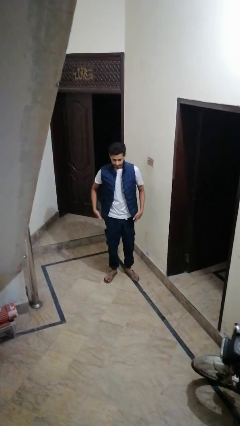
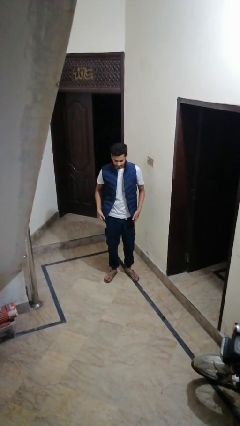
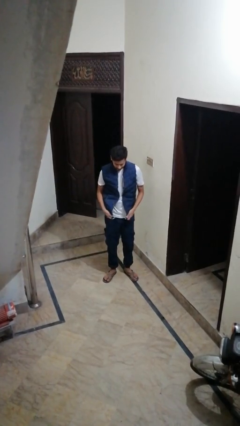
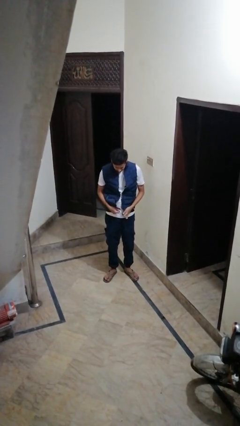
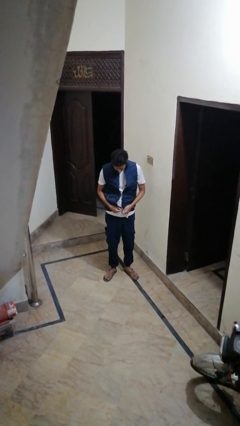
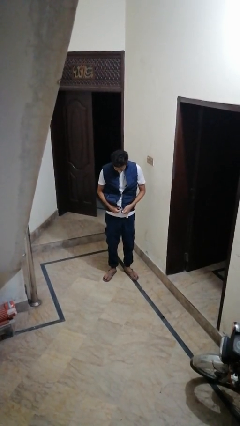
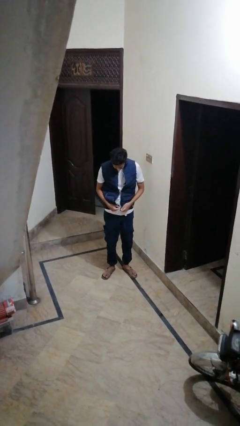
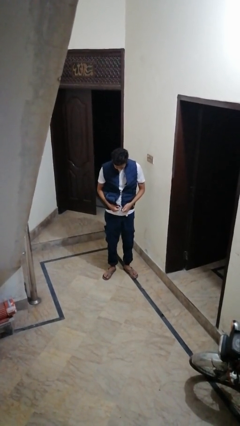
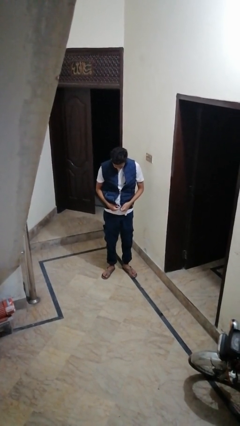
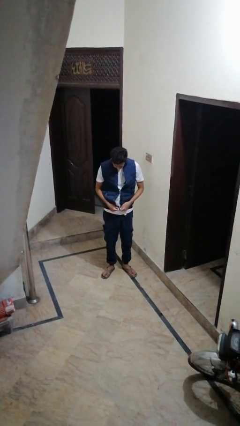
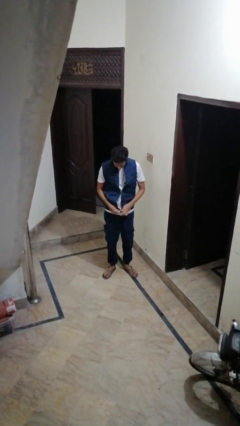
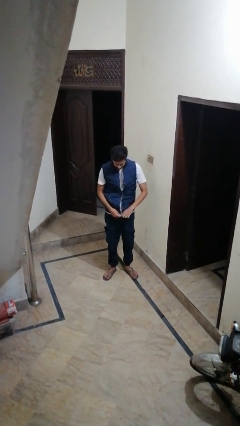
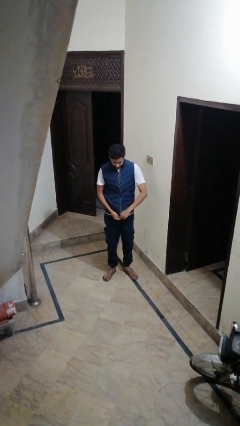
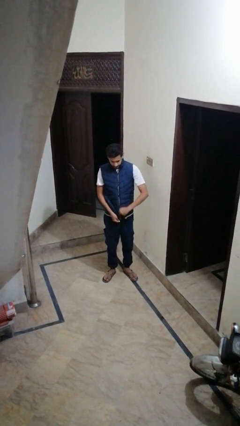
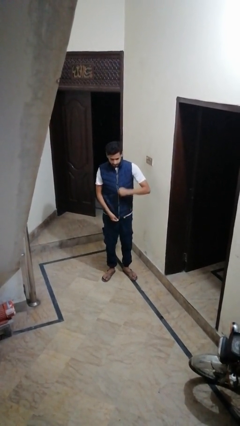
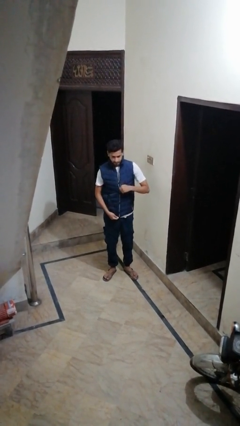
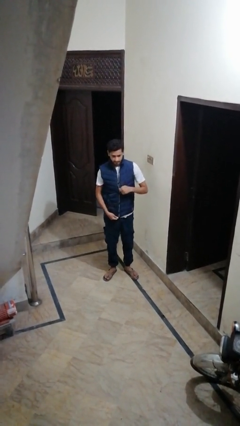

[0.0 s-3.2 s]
person zips up jacket

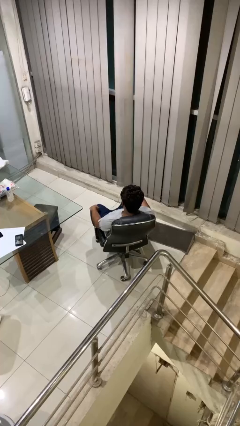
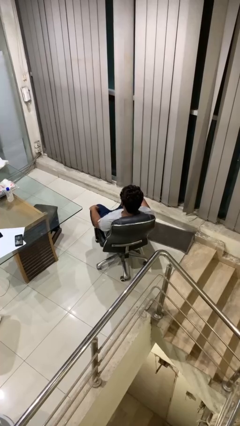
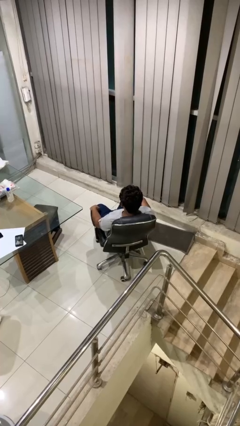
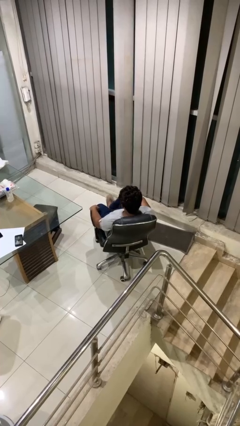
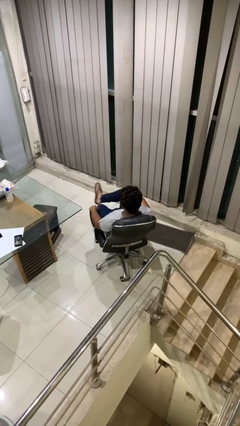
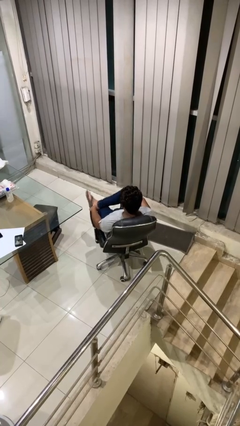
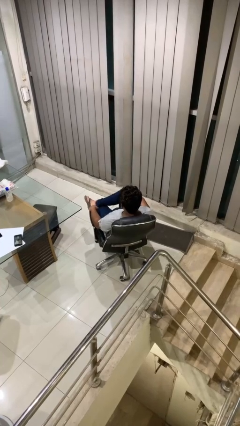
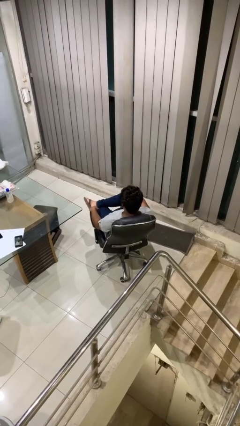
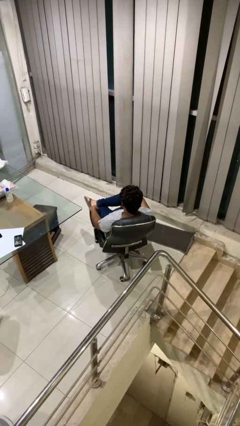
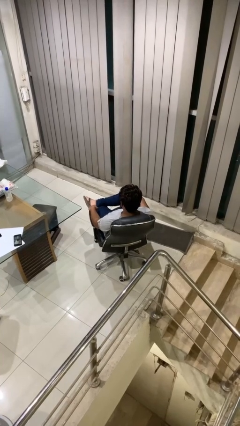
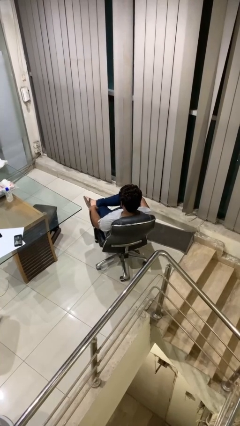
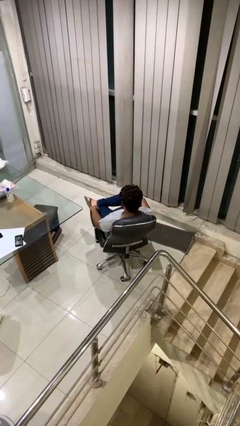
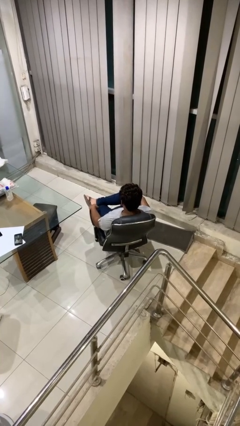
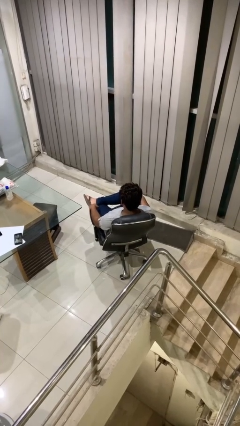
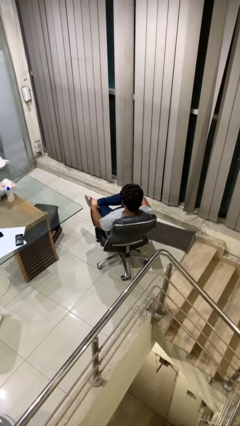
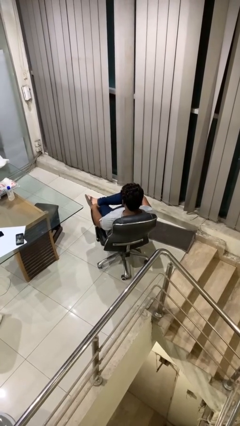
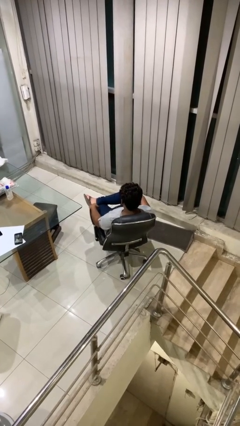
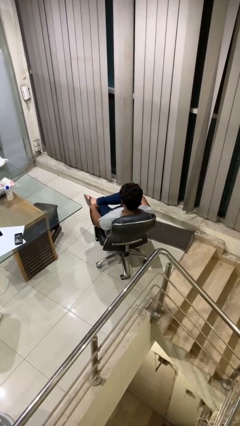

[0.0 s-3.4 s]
person crosses legs

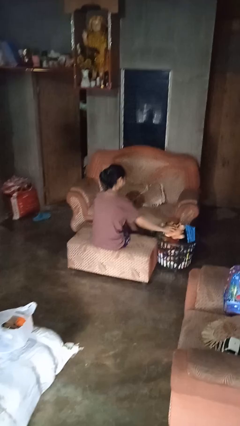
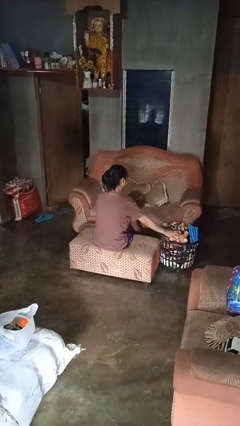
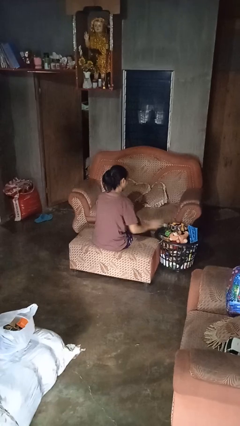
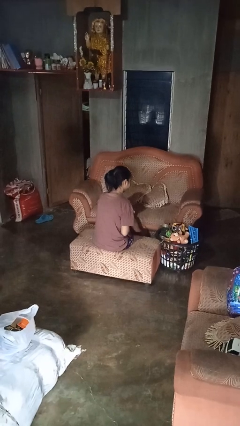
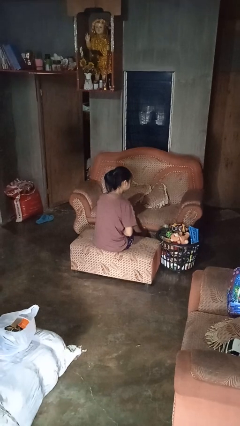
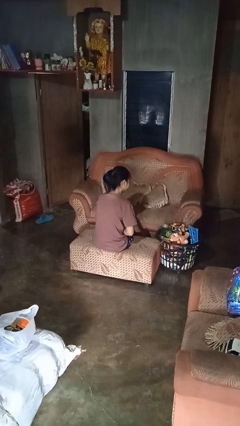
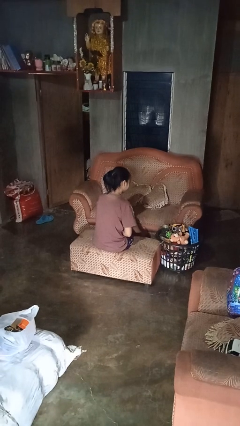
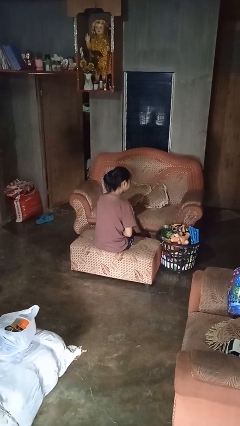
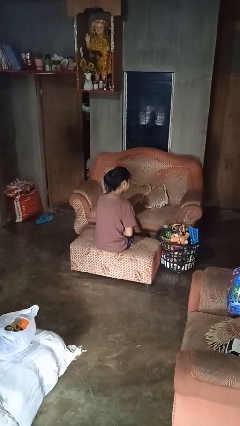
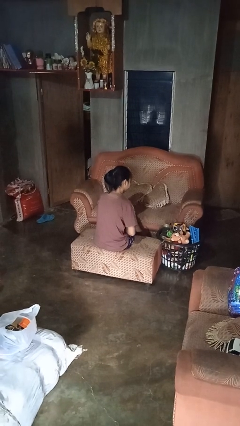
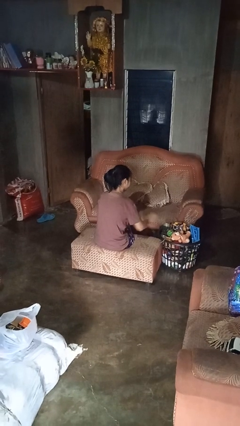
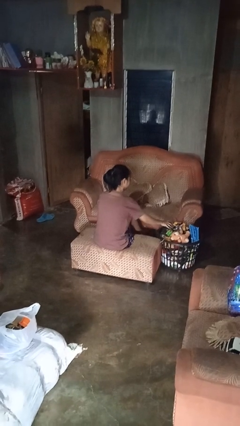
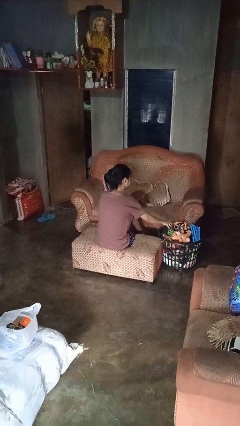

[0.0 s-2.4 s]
person puts object into basket

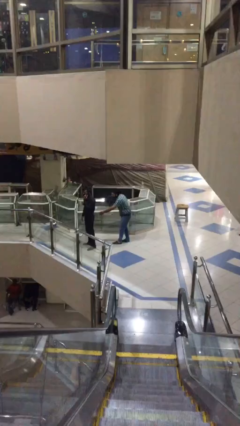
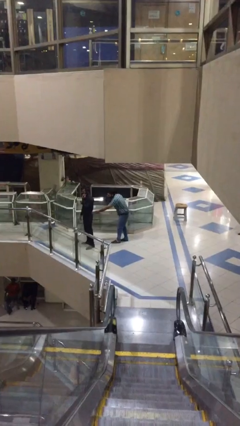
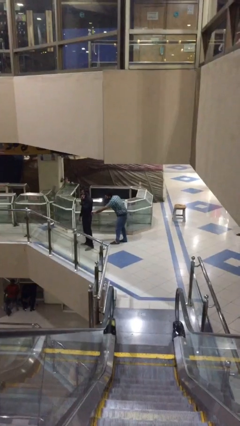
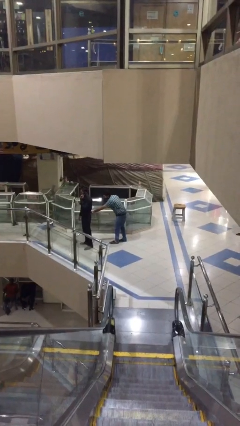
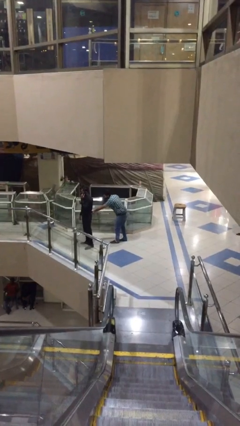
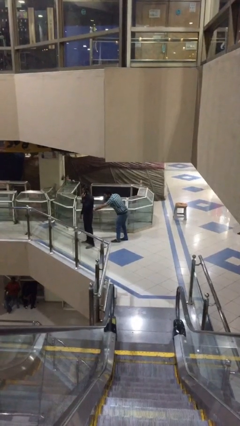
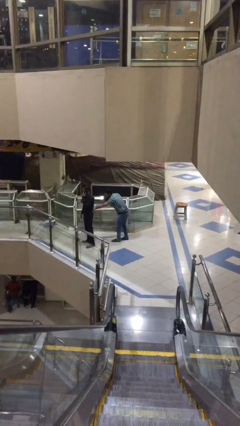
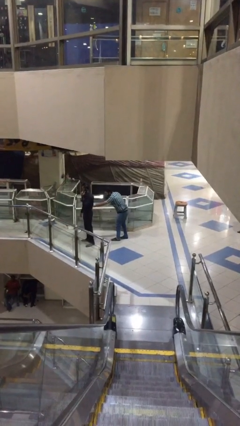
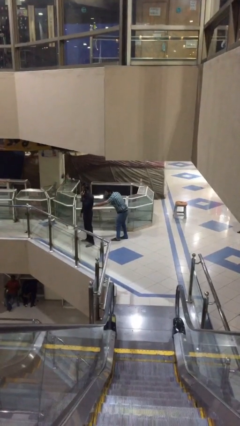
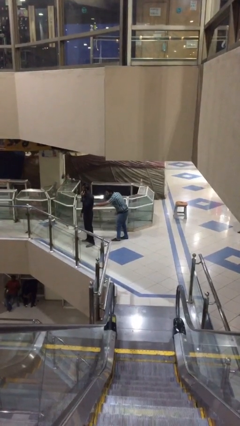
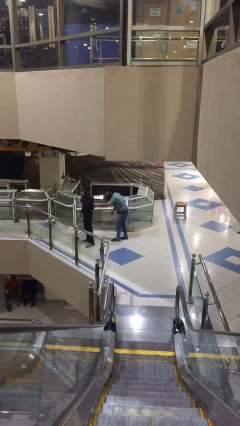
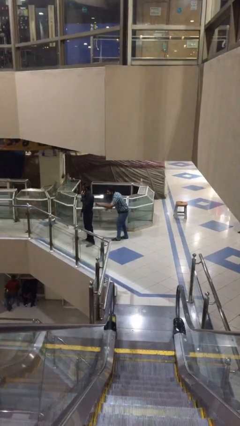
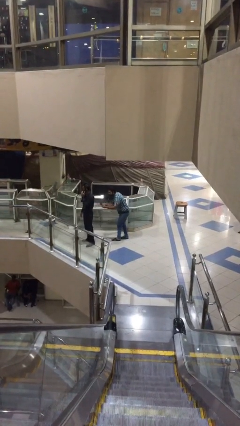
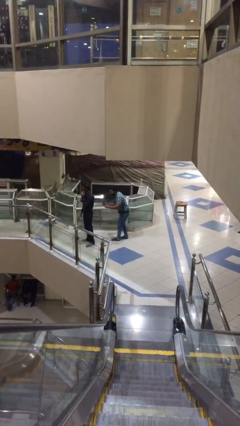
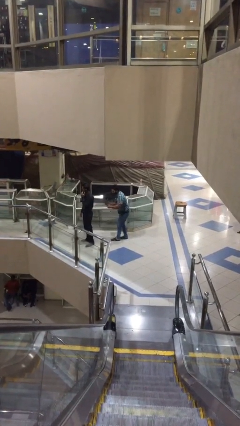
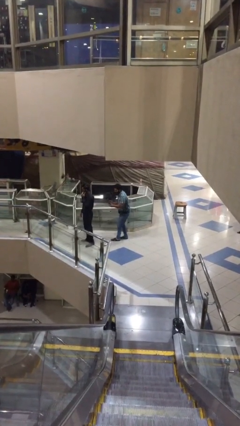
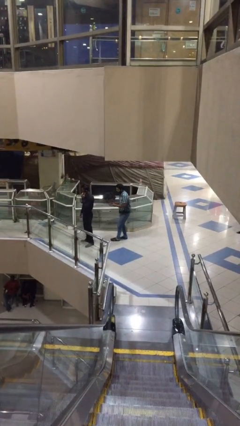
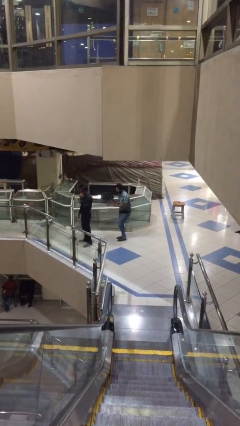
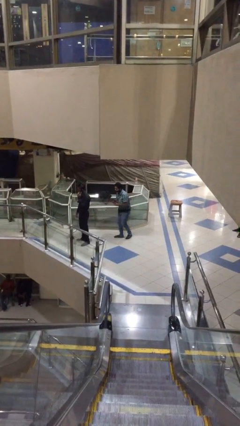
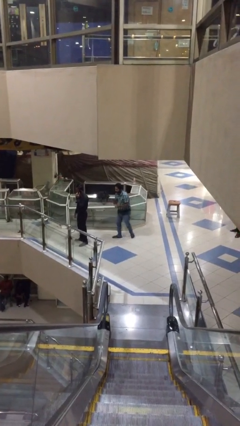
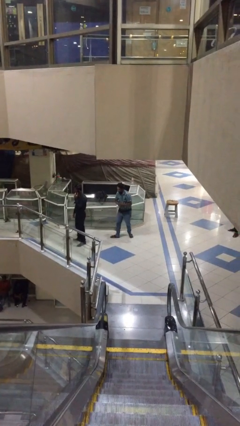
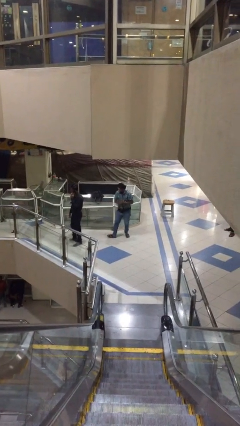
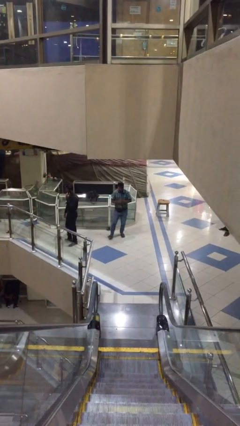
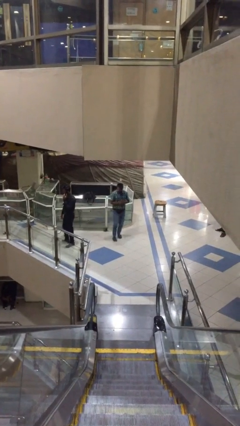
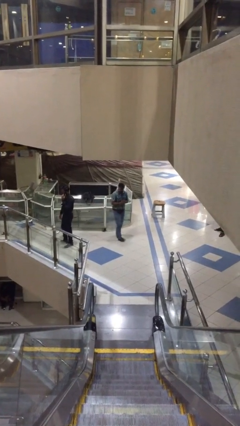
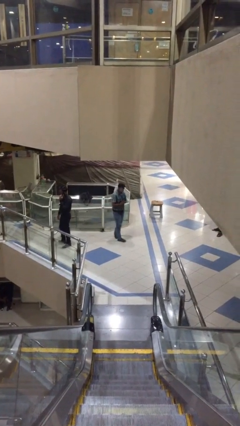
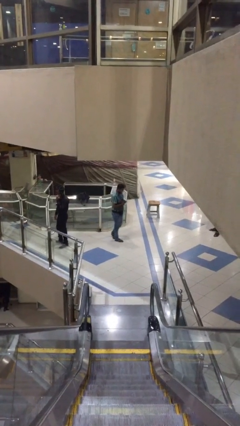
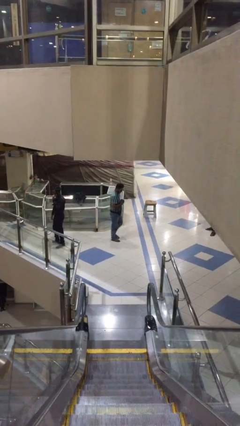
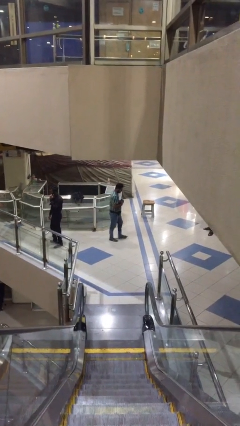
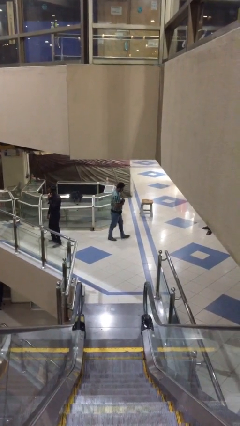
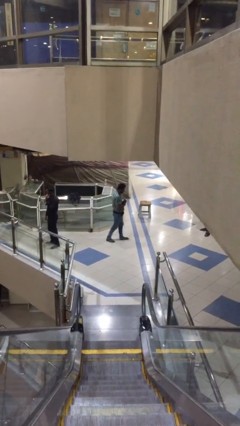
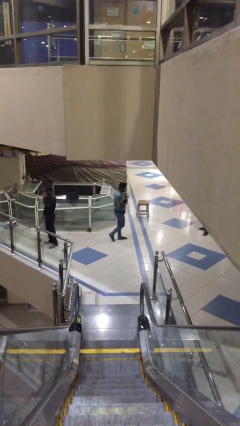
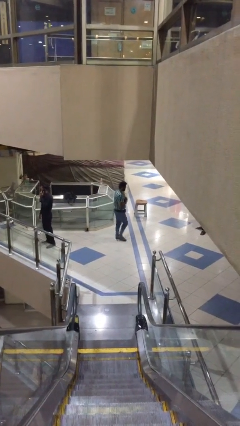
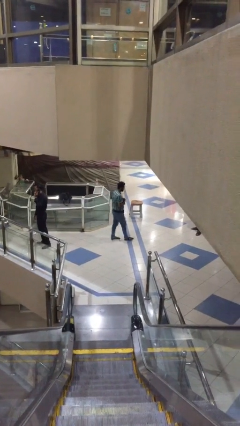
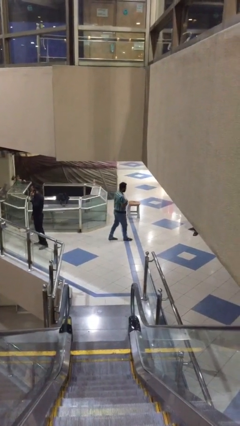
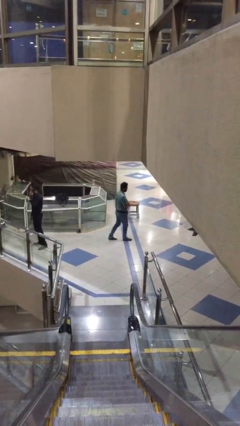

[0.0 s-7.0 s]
person steals object from person

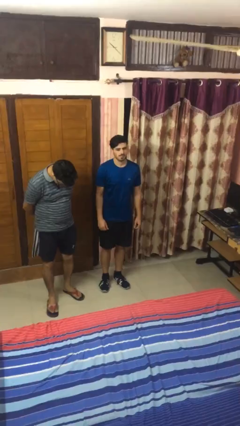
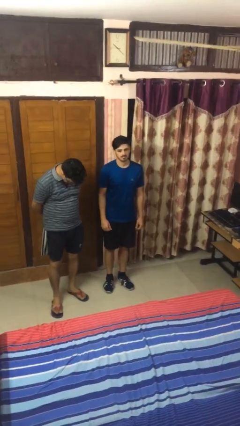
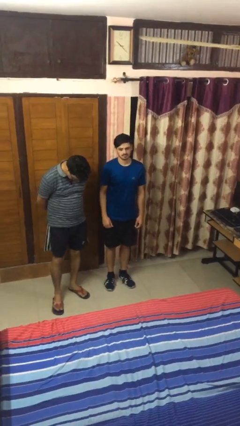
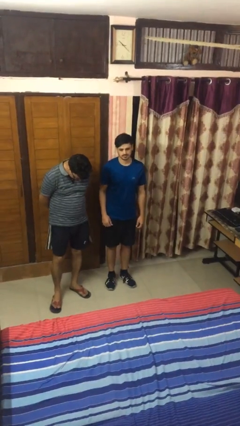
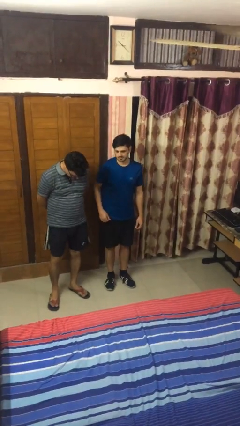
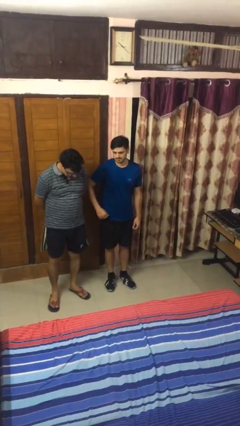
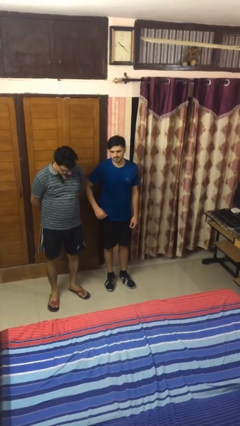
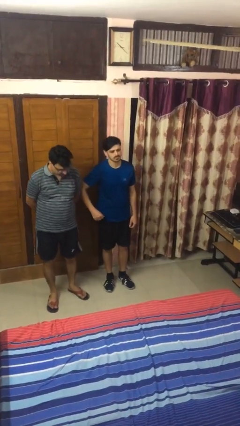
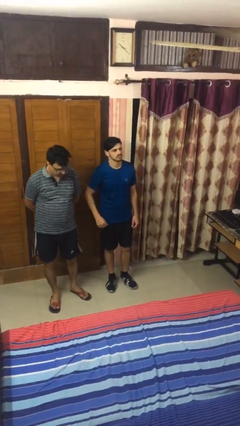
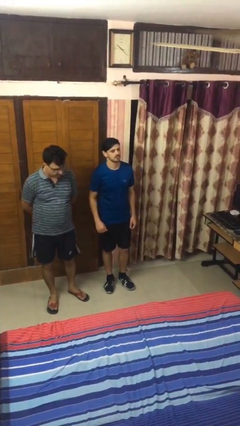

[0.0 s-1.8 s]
person nudges person with elbow
